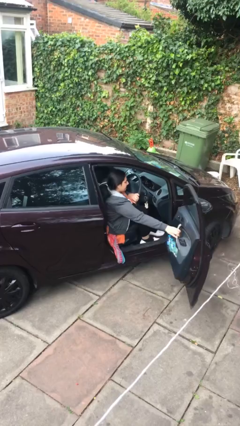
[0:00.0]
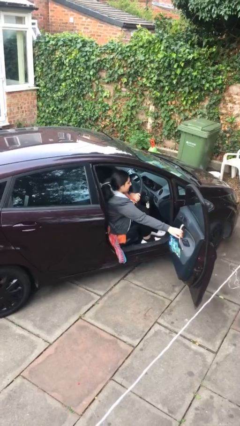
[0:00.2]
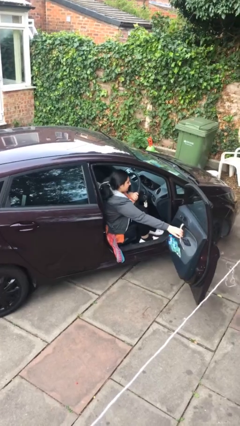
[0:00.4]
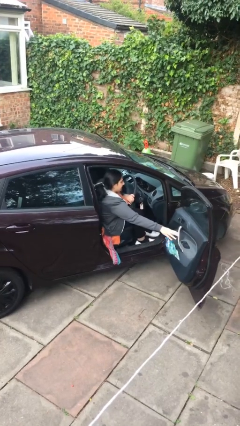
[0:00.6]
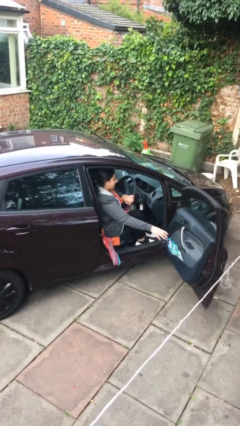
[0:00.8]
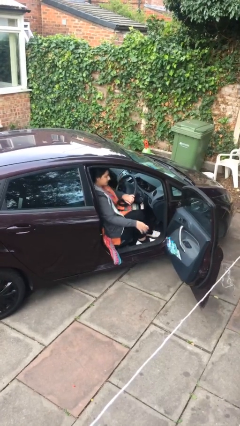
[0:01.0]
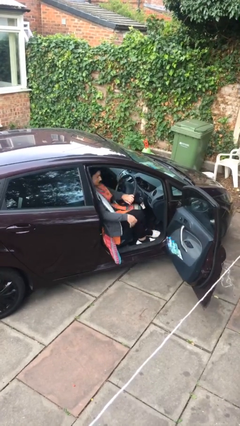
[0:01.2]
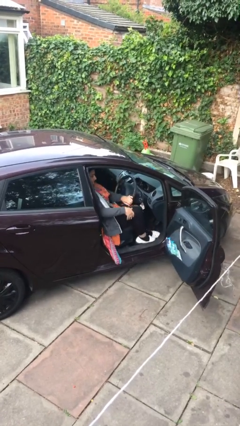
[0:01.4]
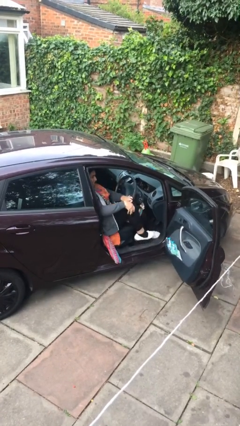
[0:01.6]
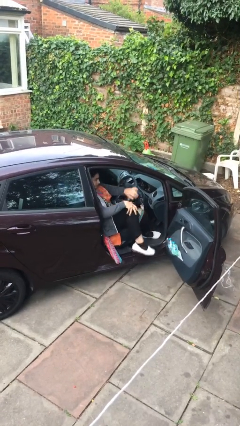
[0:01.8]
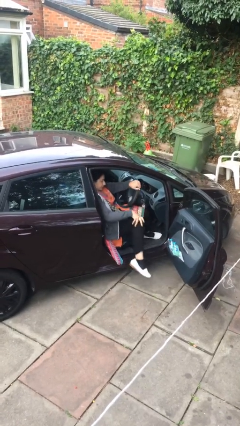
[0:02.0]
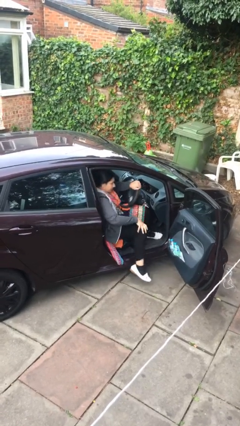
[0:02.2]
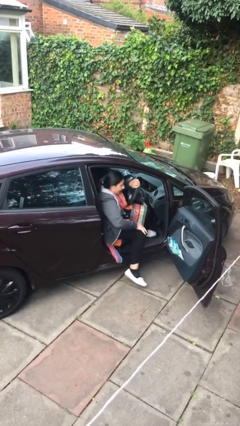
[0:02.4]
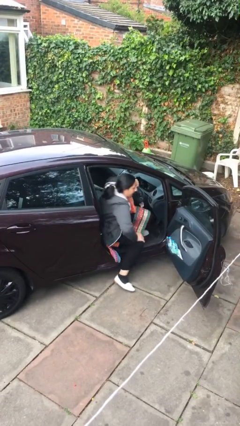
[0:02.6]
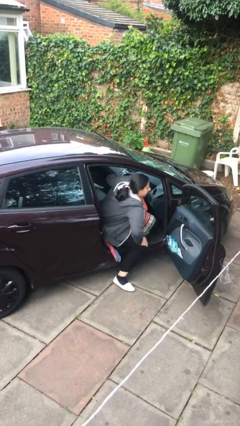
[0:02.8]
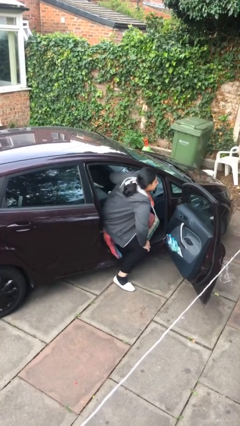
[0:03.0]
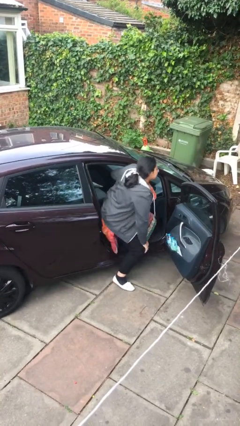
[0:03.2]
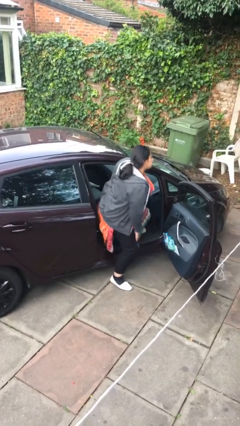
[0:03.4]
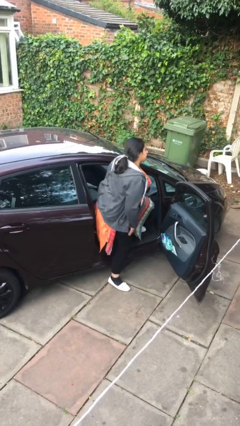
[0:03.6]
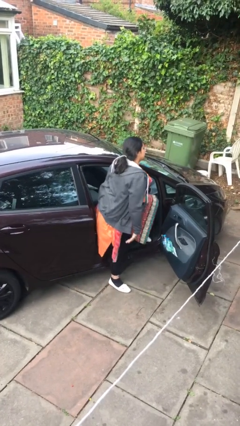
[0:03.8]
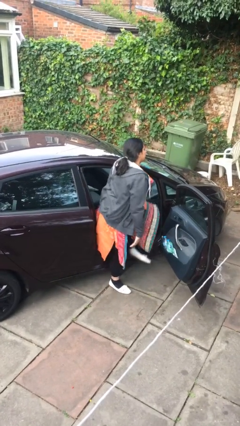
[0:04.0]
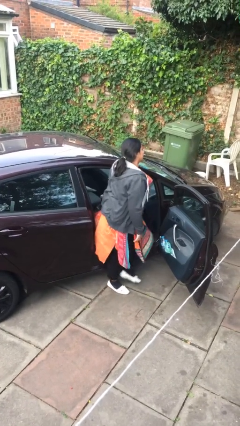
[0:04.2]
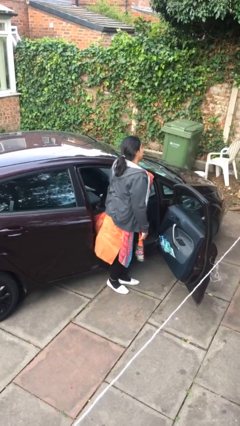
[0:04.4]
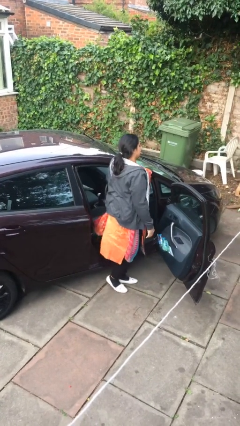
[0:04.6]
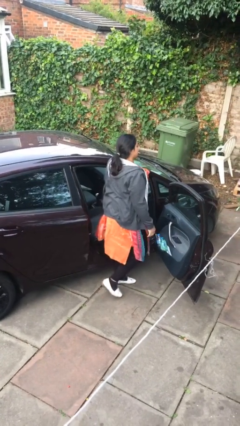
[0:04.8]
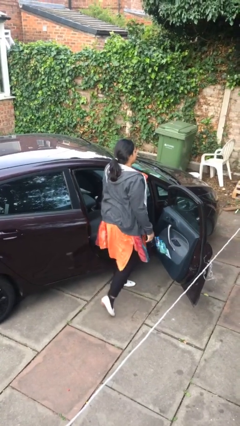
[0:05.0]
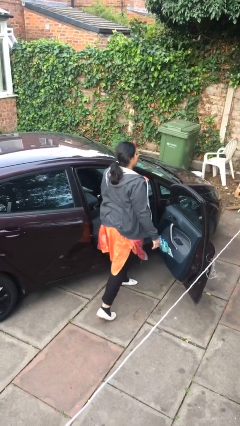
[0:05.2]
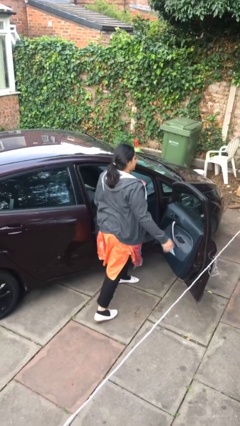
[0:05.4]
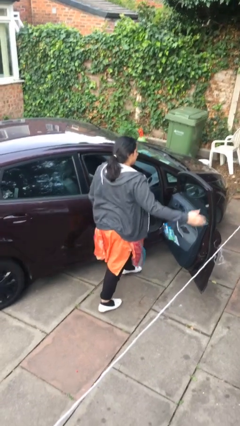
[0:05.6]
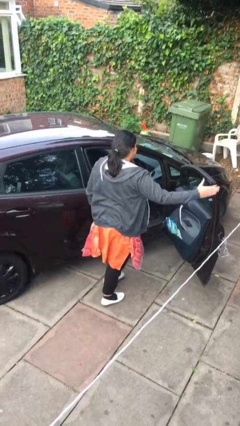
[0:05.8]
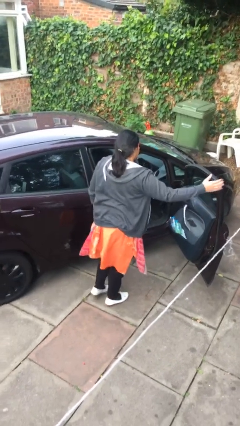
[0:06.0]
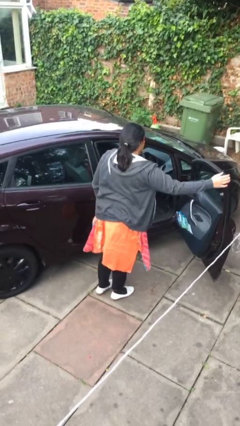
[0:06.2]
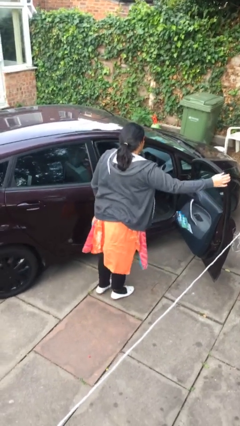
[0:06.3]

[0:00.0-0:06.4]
person exits car

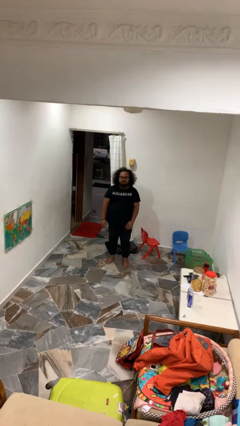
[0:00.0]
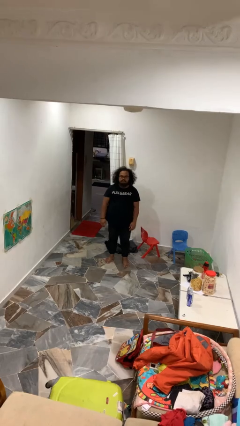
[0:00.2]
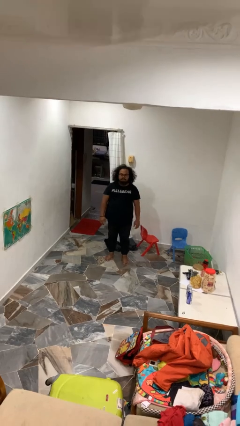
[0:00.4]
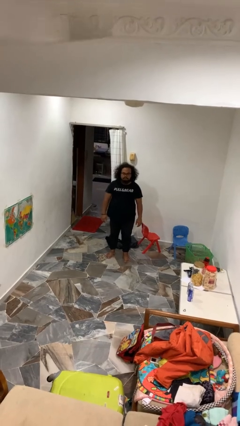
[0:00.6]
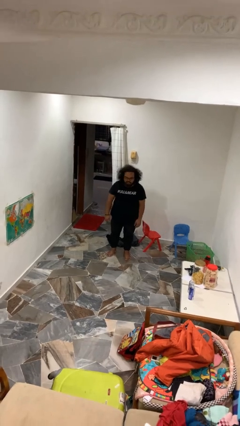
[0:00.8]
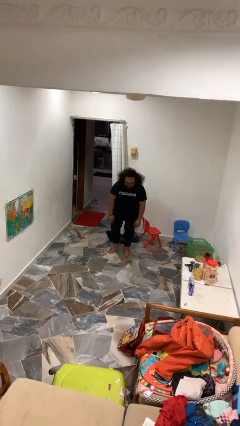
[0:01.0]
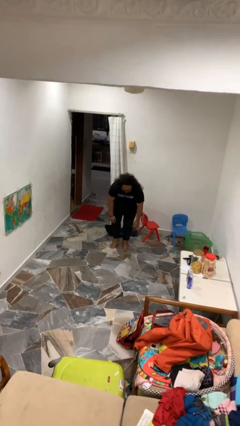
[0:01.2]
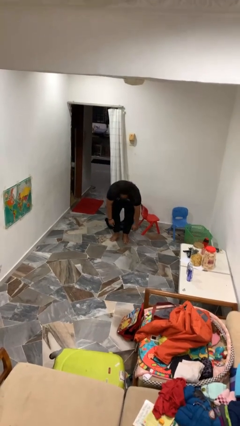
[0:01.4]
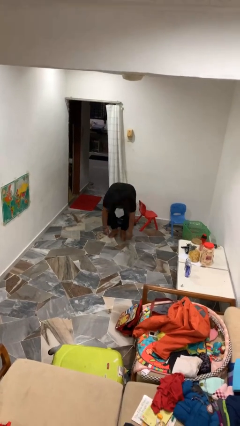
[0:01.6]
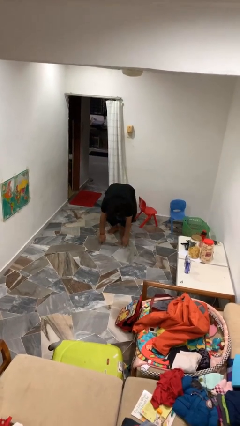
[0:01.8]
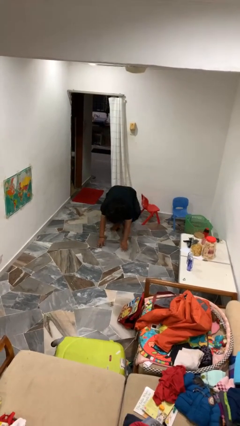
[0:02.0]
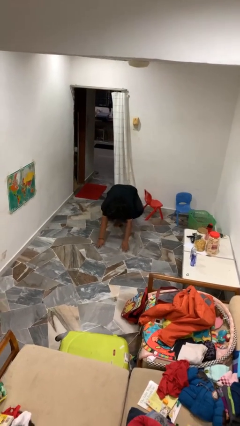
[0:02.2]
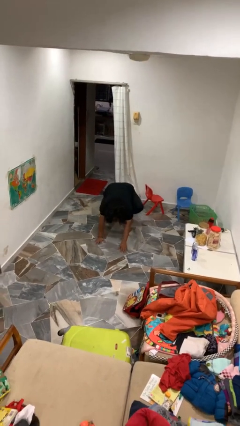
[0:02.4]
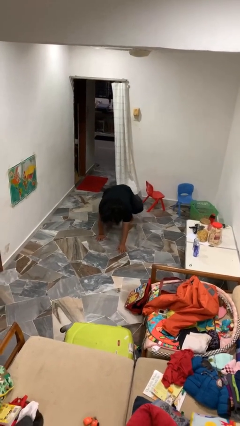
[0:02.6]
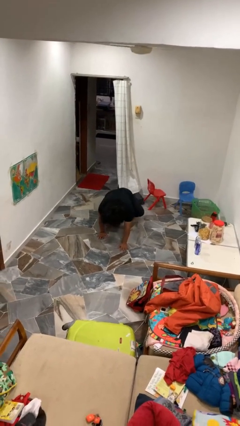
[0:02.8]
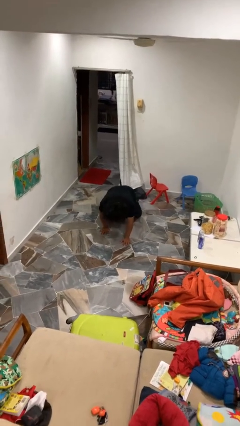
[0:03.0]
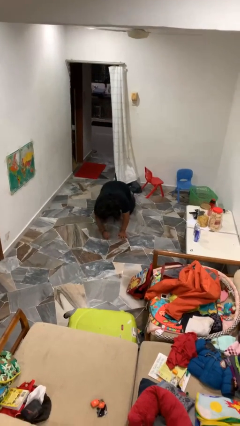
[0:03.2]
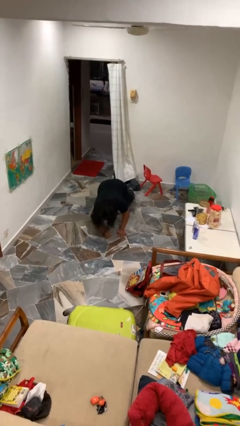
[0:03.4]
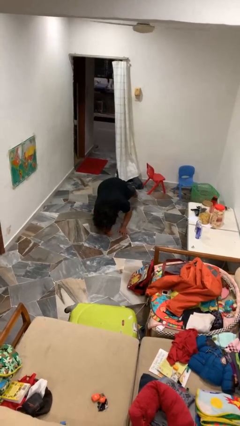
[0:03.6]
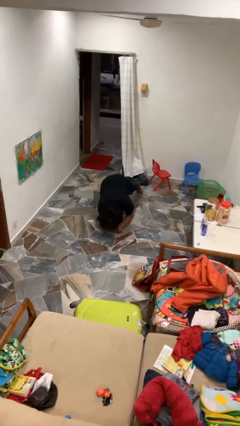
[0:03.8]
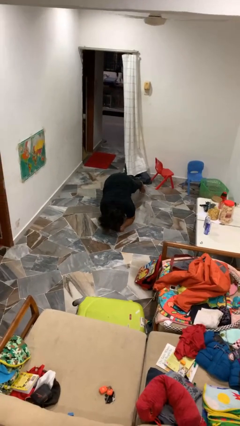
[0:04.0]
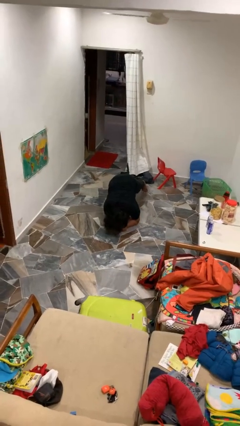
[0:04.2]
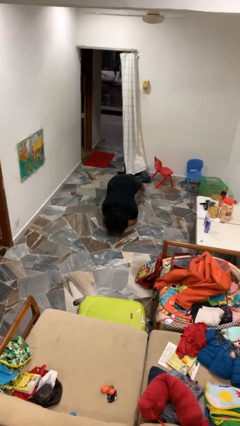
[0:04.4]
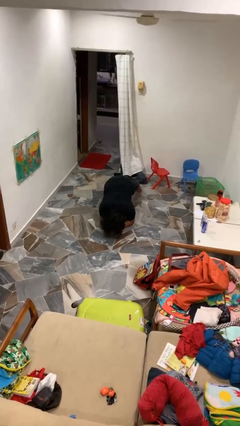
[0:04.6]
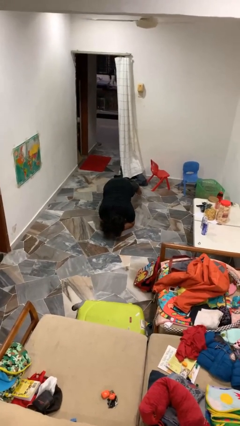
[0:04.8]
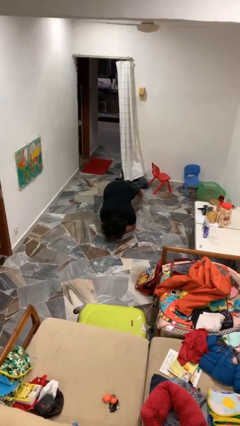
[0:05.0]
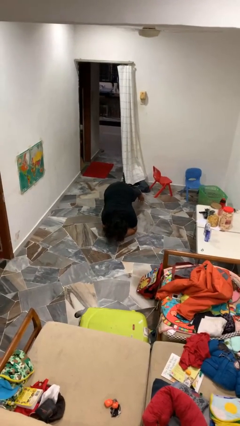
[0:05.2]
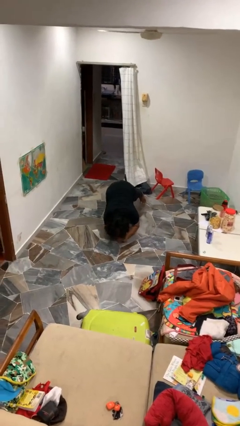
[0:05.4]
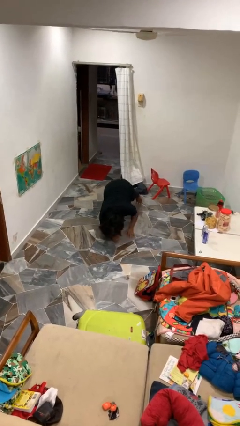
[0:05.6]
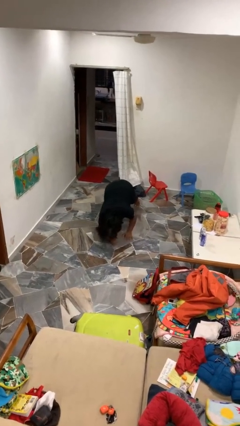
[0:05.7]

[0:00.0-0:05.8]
person exercises with plank

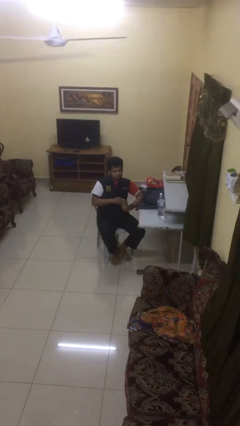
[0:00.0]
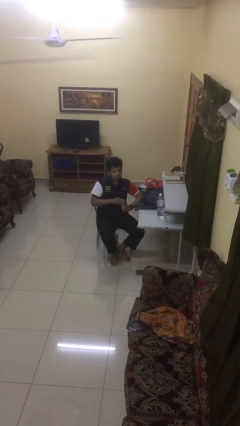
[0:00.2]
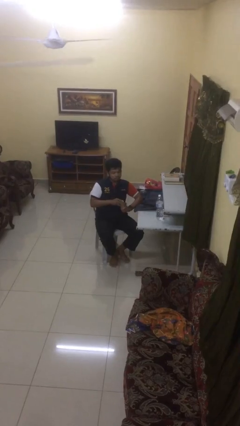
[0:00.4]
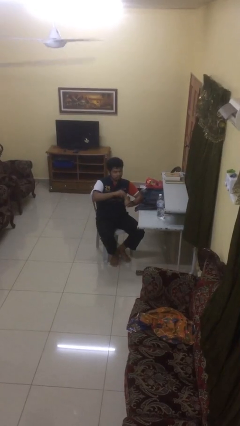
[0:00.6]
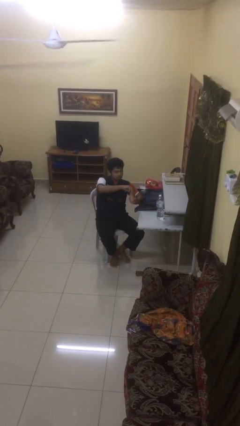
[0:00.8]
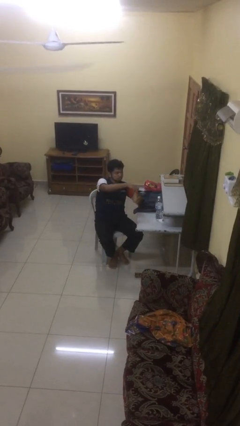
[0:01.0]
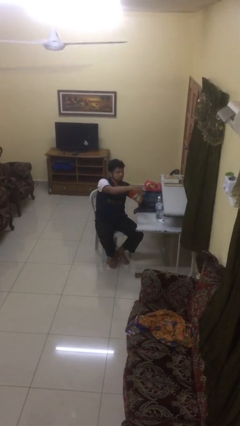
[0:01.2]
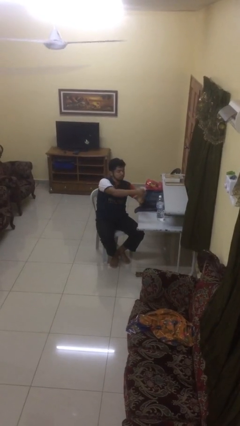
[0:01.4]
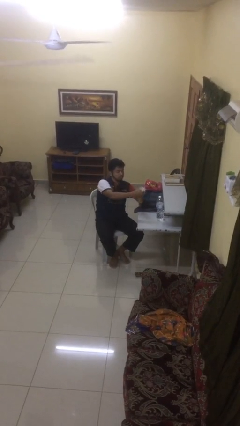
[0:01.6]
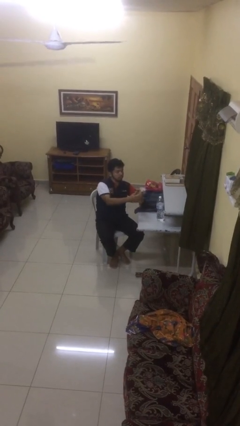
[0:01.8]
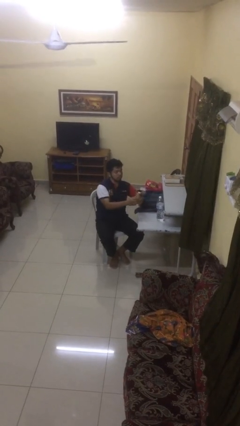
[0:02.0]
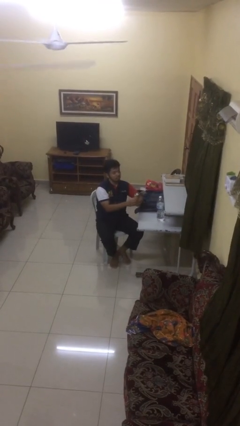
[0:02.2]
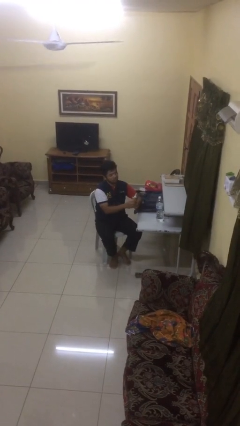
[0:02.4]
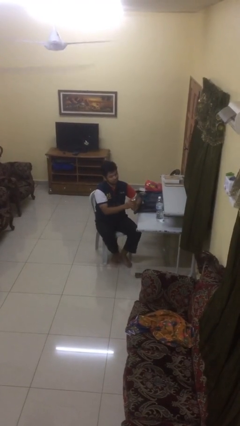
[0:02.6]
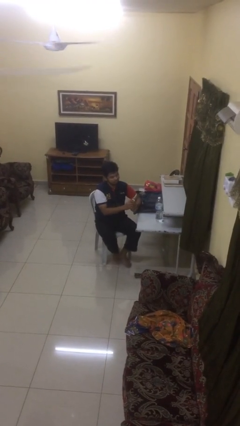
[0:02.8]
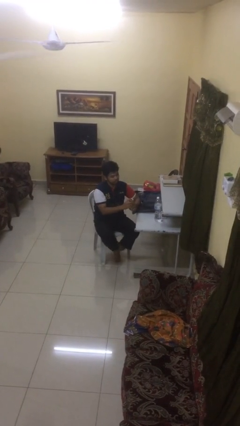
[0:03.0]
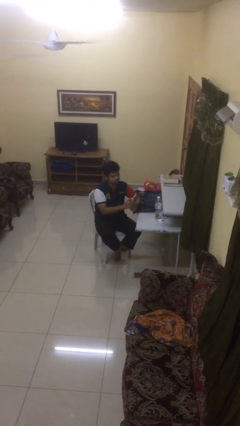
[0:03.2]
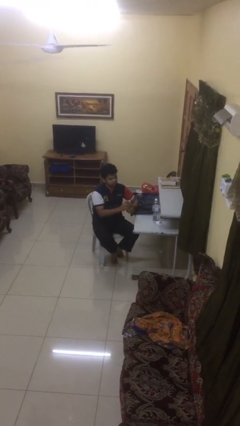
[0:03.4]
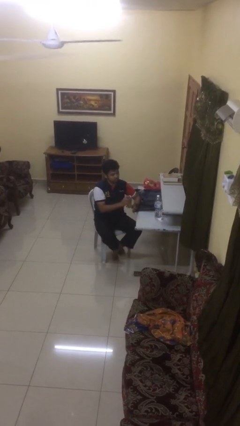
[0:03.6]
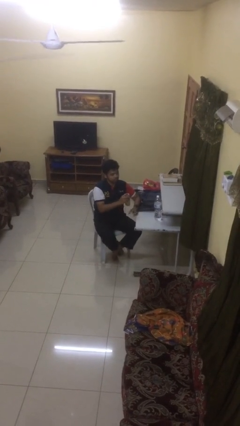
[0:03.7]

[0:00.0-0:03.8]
person opens beverage can

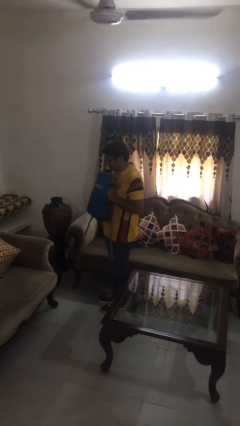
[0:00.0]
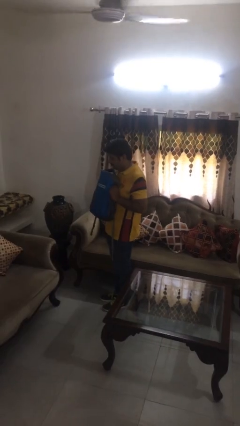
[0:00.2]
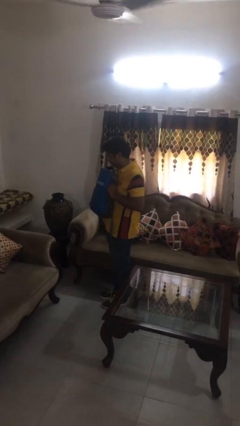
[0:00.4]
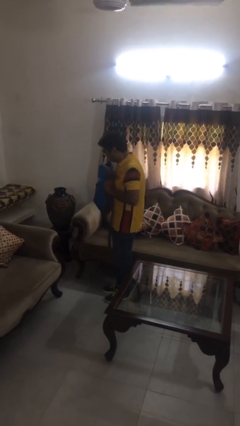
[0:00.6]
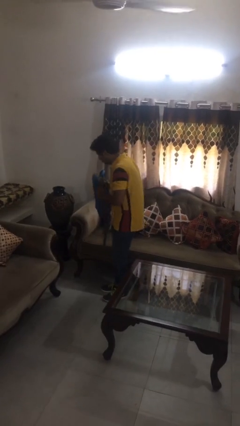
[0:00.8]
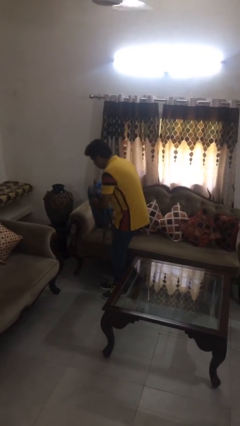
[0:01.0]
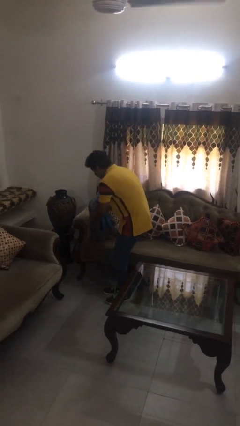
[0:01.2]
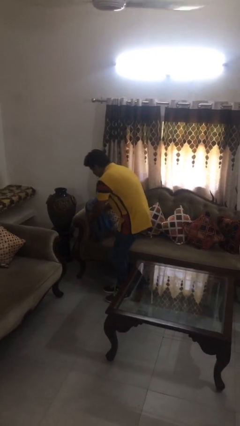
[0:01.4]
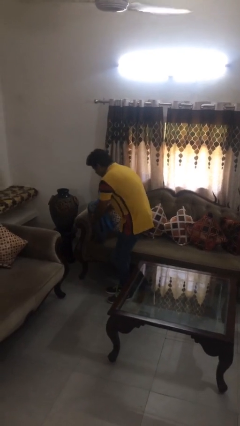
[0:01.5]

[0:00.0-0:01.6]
person puts down object on couch

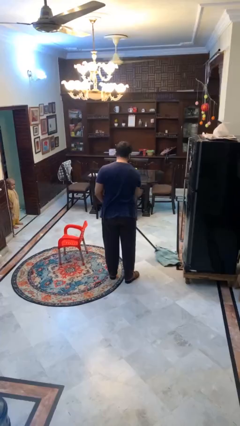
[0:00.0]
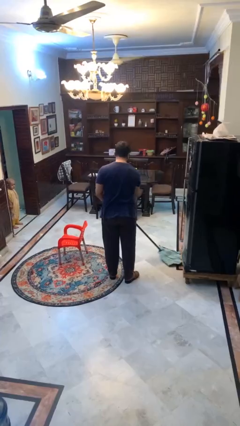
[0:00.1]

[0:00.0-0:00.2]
person mops
